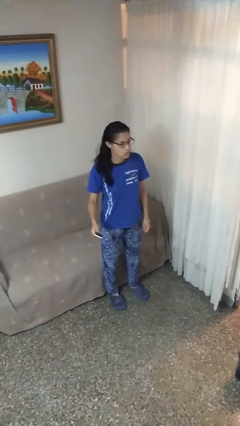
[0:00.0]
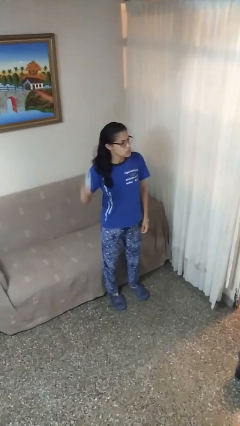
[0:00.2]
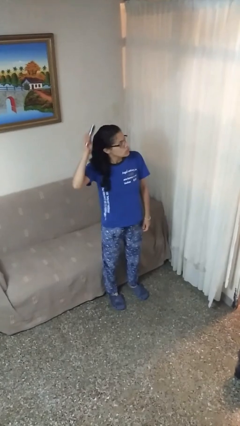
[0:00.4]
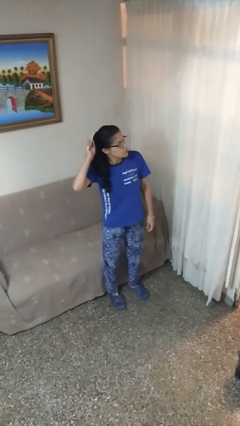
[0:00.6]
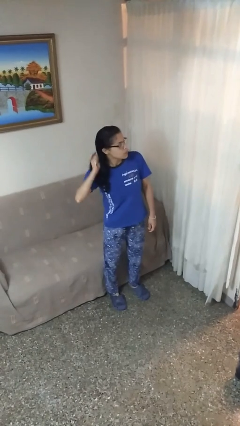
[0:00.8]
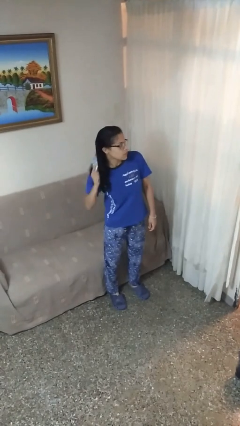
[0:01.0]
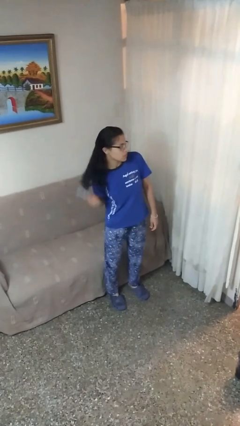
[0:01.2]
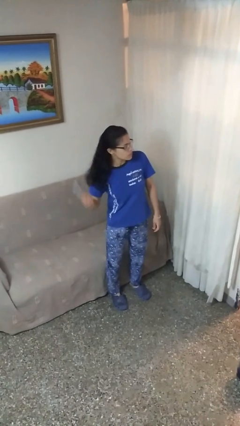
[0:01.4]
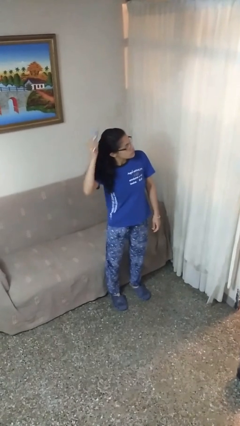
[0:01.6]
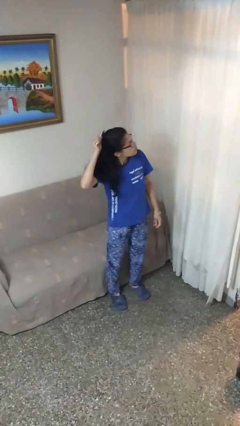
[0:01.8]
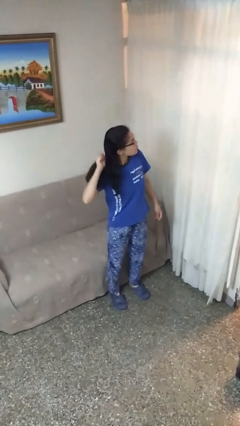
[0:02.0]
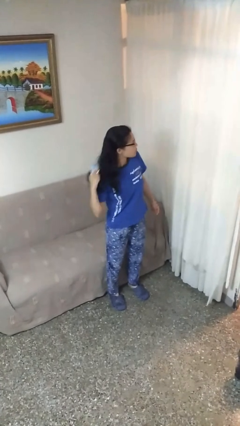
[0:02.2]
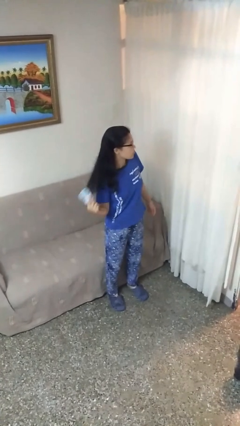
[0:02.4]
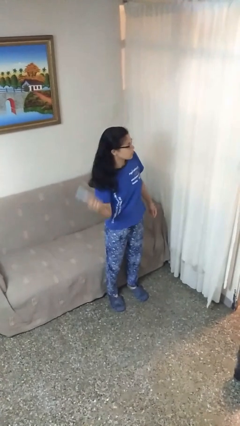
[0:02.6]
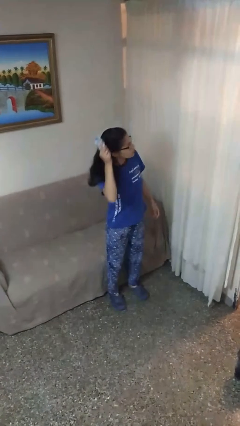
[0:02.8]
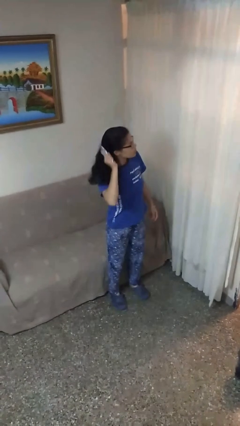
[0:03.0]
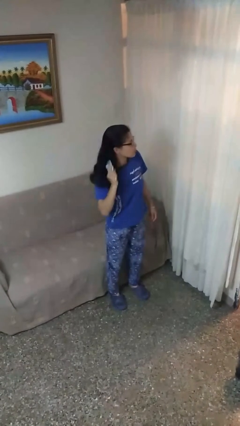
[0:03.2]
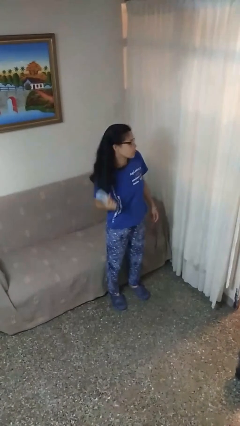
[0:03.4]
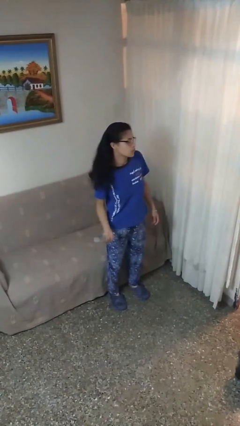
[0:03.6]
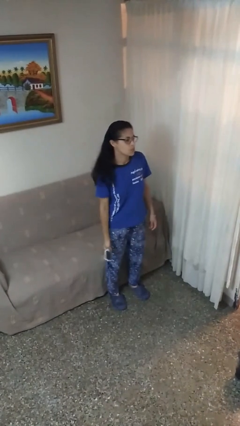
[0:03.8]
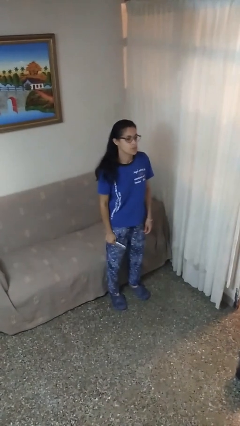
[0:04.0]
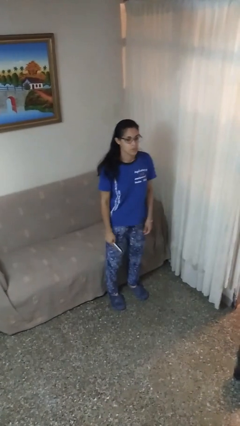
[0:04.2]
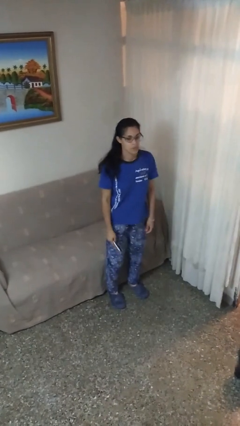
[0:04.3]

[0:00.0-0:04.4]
person brushes hair

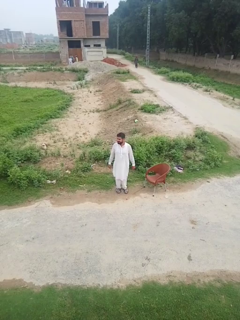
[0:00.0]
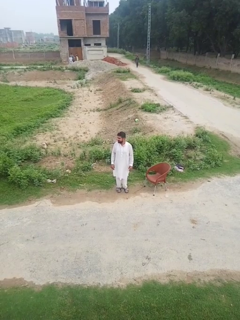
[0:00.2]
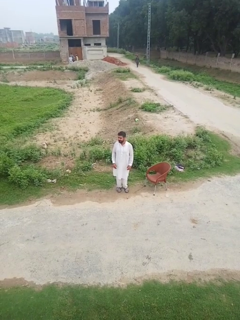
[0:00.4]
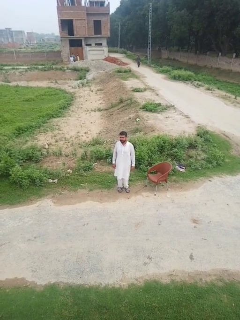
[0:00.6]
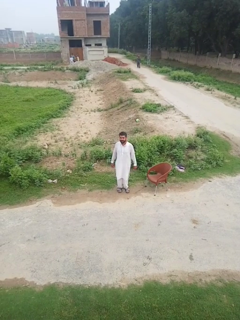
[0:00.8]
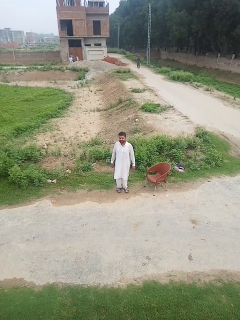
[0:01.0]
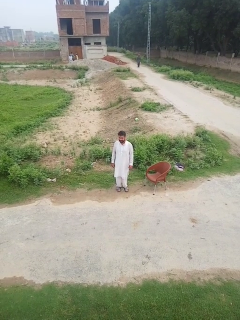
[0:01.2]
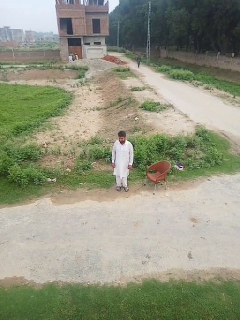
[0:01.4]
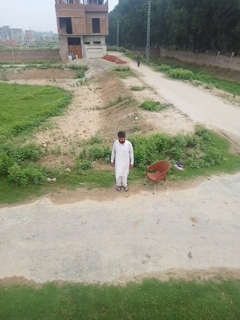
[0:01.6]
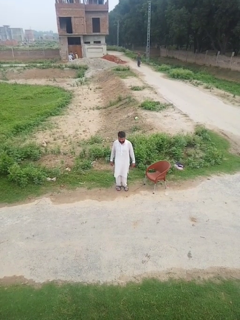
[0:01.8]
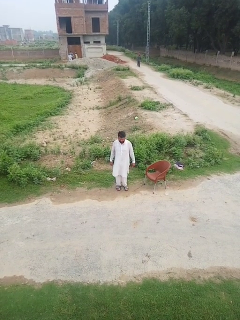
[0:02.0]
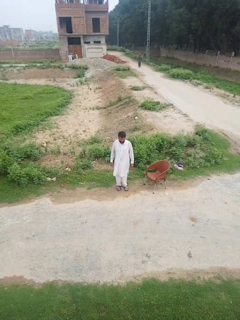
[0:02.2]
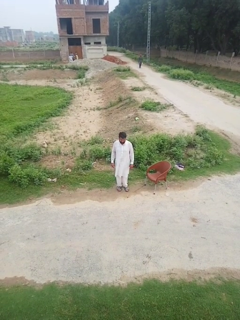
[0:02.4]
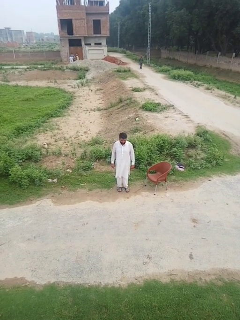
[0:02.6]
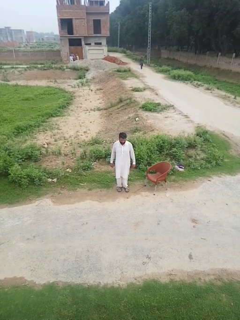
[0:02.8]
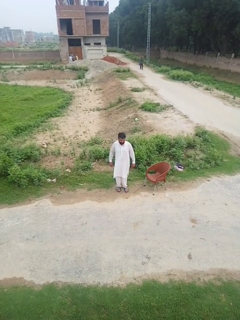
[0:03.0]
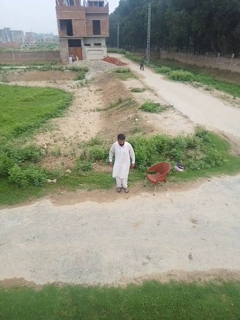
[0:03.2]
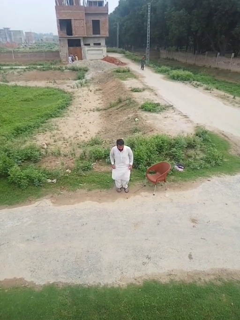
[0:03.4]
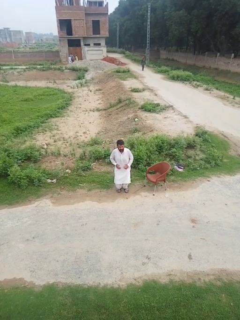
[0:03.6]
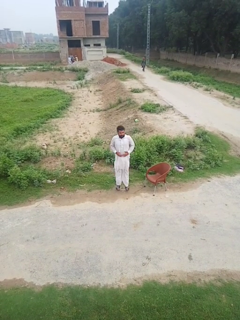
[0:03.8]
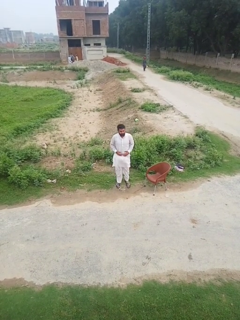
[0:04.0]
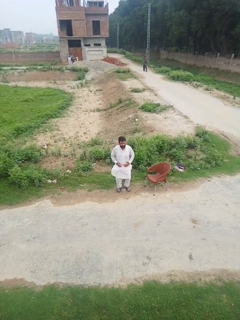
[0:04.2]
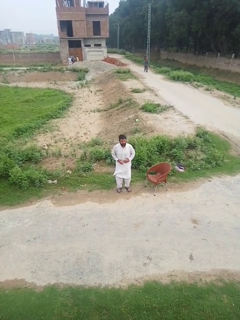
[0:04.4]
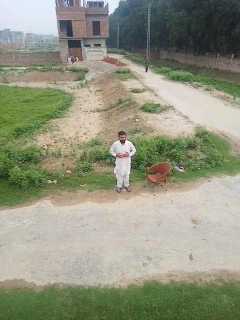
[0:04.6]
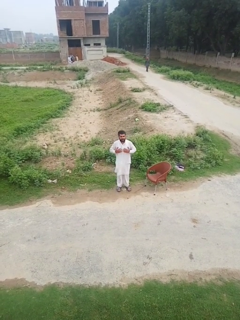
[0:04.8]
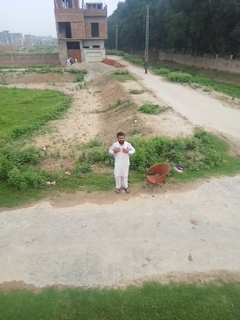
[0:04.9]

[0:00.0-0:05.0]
person jumps

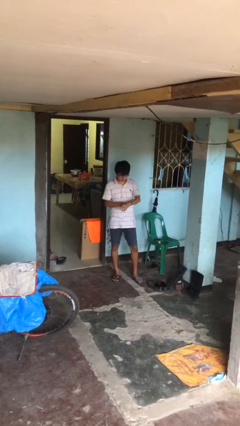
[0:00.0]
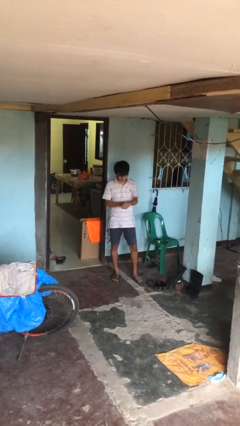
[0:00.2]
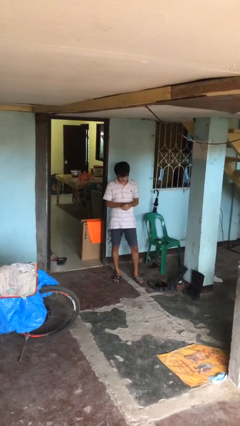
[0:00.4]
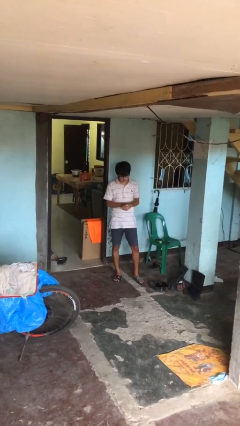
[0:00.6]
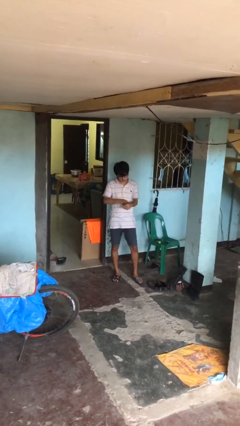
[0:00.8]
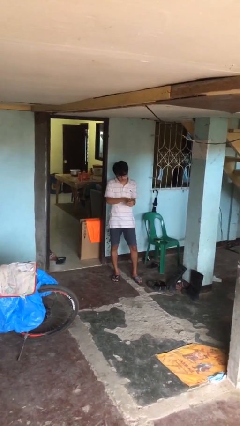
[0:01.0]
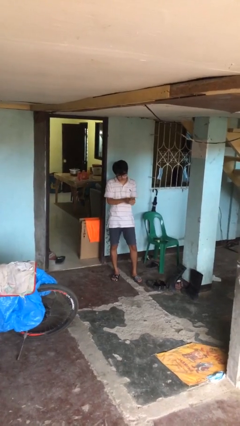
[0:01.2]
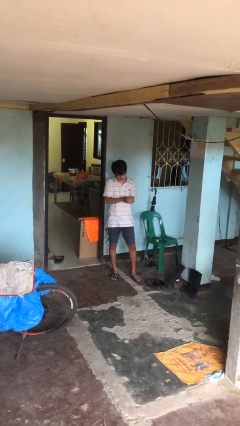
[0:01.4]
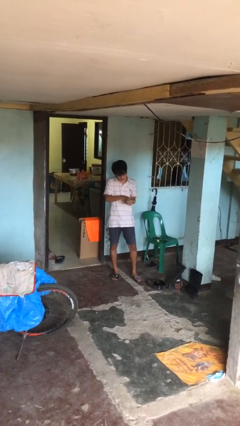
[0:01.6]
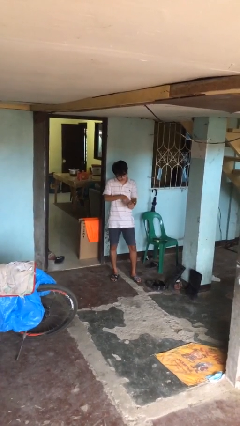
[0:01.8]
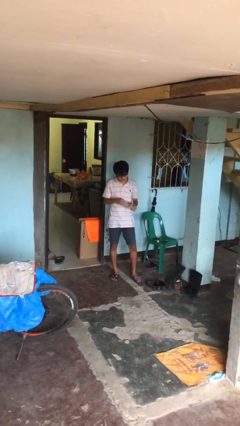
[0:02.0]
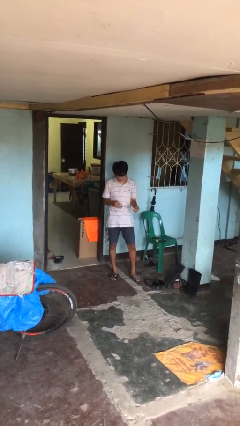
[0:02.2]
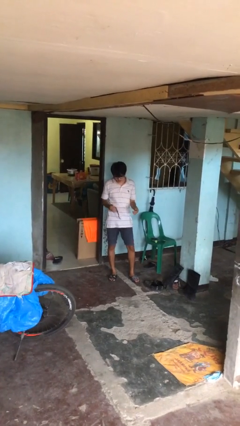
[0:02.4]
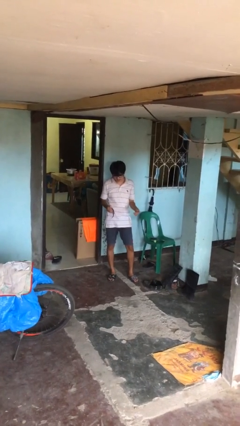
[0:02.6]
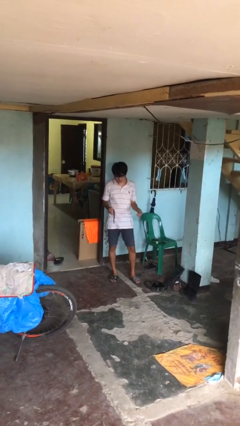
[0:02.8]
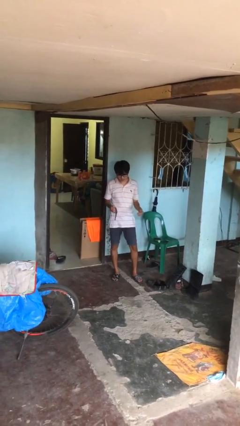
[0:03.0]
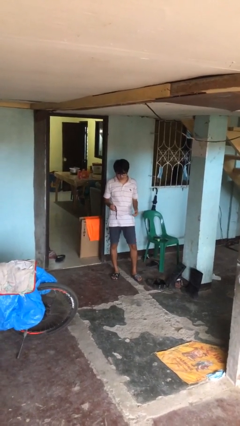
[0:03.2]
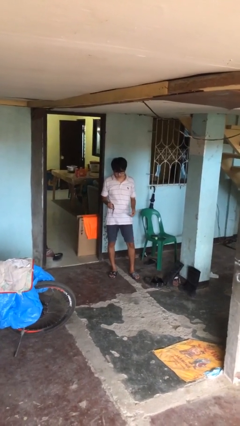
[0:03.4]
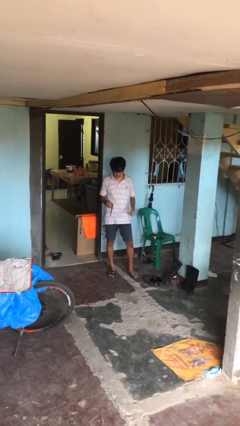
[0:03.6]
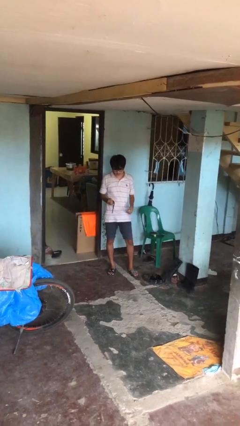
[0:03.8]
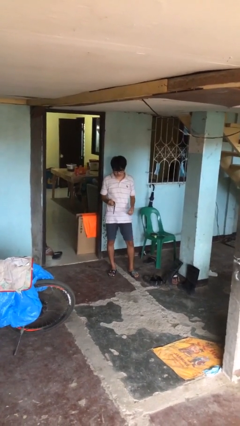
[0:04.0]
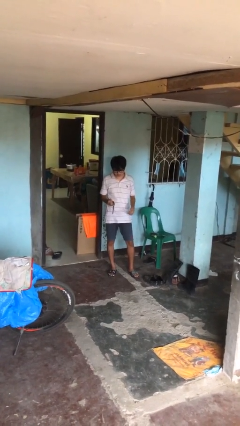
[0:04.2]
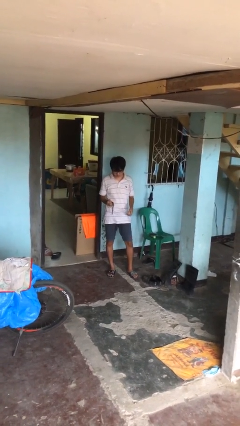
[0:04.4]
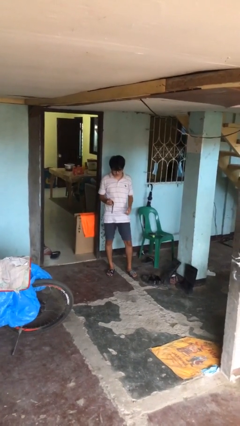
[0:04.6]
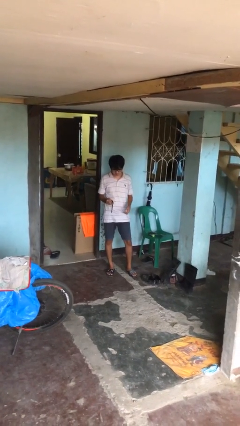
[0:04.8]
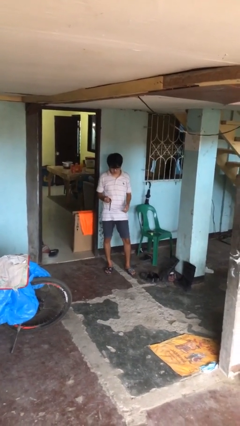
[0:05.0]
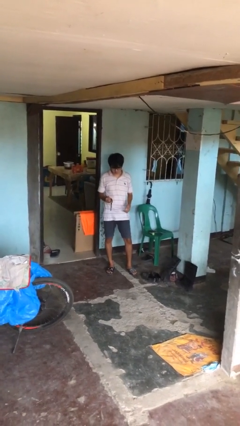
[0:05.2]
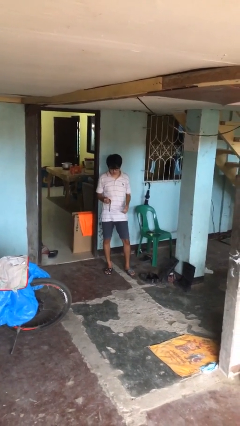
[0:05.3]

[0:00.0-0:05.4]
person takes off wristwatch

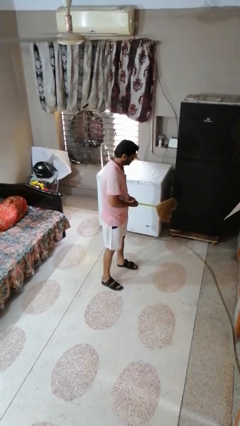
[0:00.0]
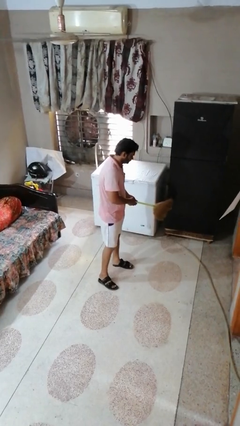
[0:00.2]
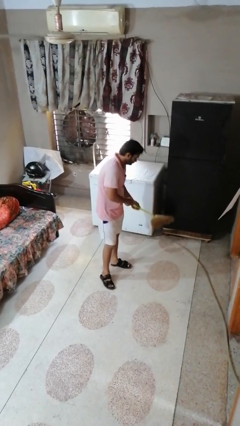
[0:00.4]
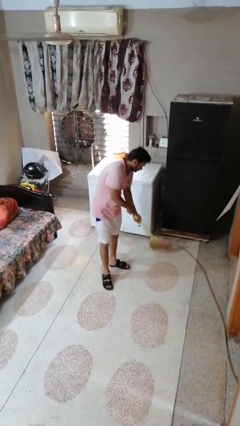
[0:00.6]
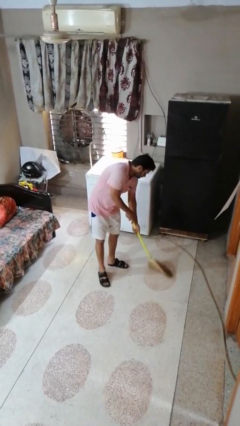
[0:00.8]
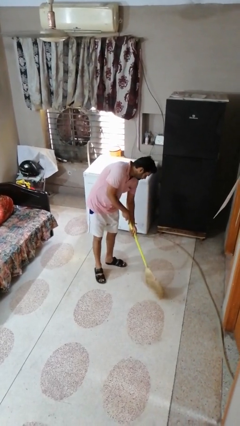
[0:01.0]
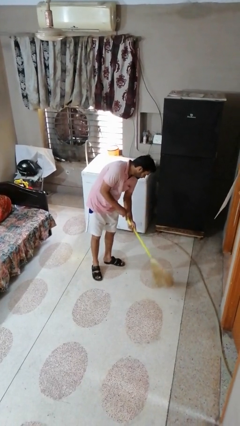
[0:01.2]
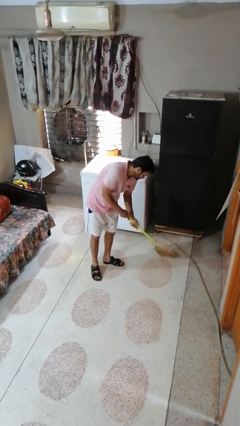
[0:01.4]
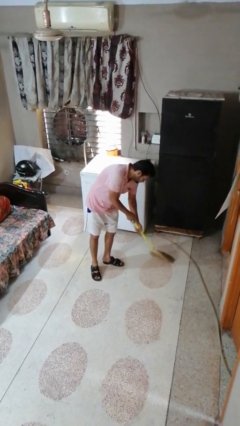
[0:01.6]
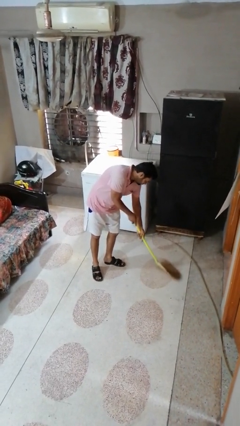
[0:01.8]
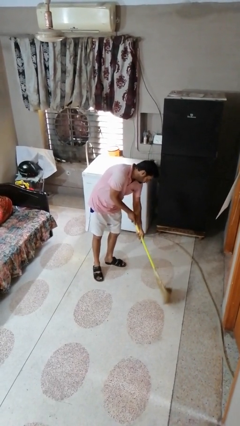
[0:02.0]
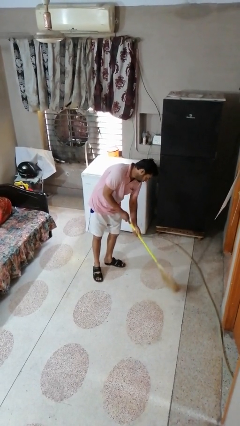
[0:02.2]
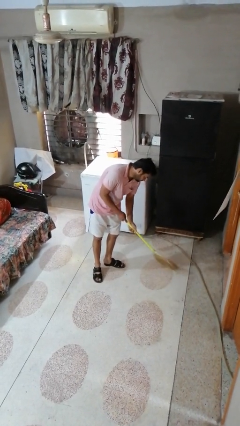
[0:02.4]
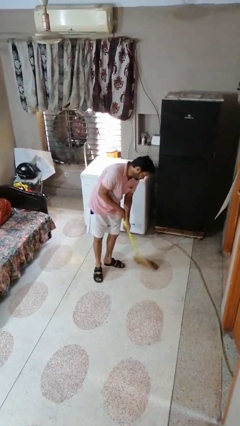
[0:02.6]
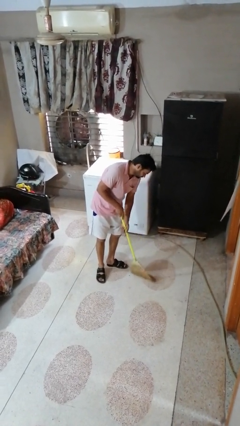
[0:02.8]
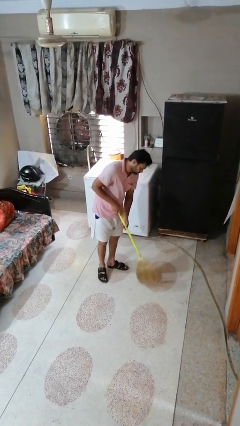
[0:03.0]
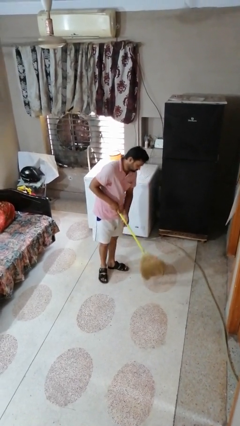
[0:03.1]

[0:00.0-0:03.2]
person sweeps floor

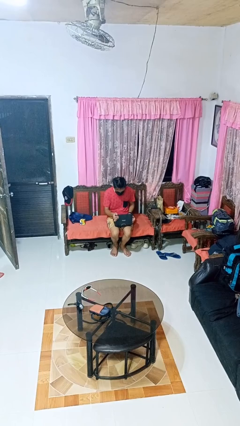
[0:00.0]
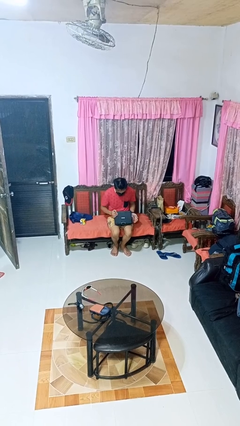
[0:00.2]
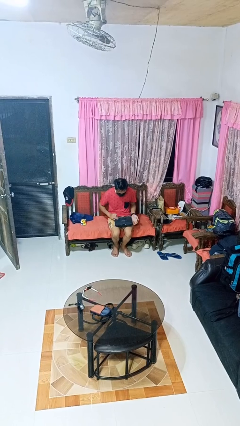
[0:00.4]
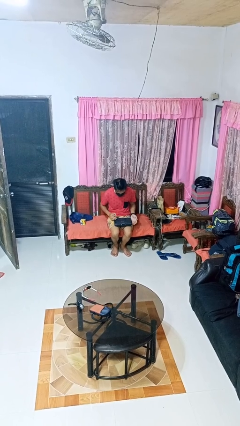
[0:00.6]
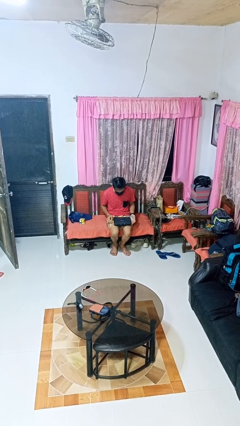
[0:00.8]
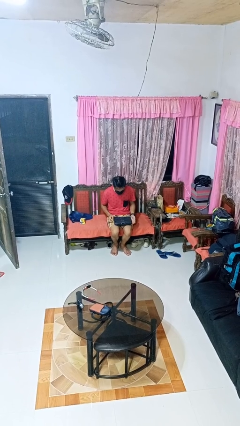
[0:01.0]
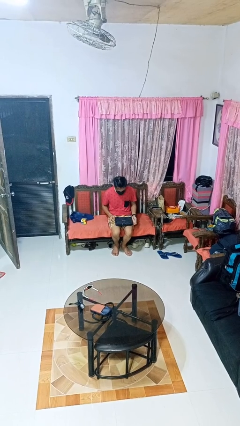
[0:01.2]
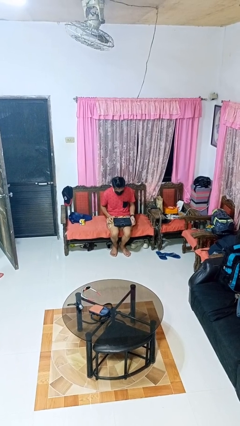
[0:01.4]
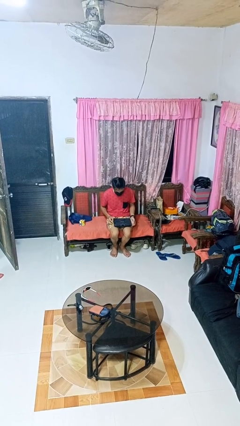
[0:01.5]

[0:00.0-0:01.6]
person closes laptop
